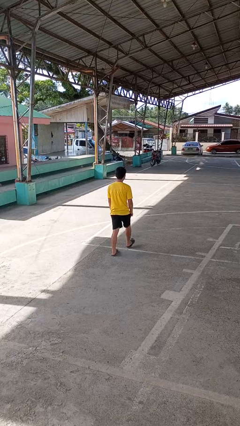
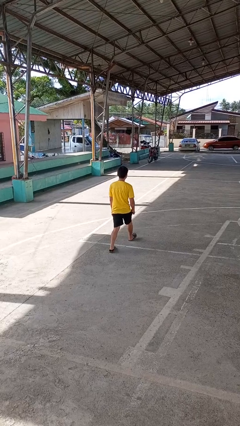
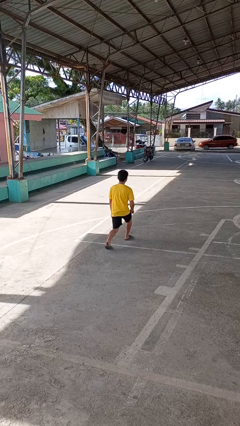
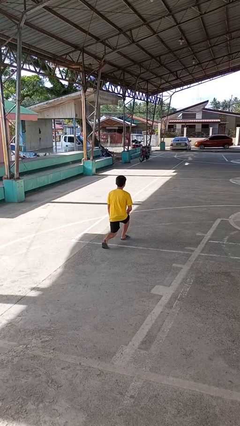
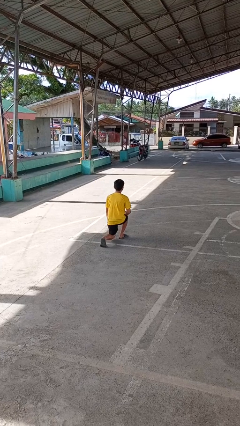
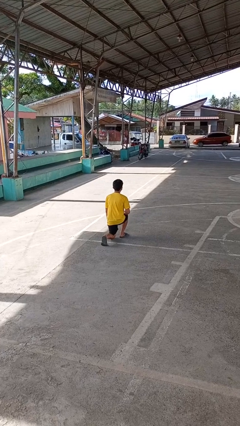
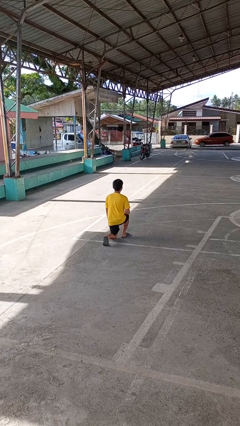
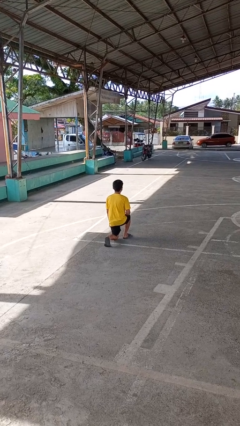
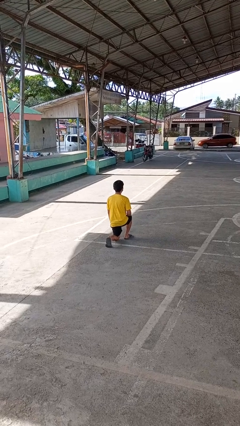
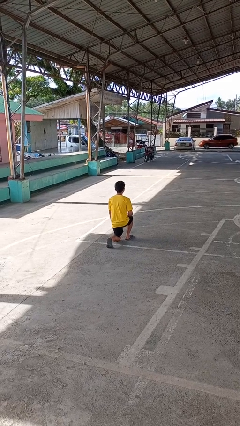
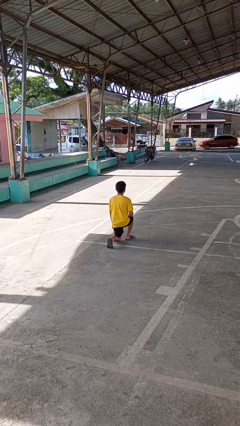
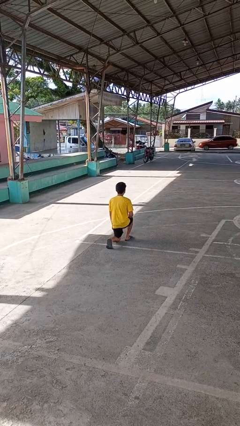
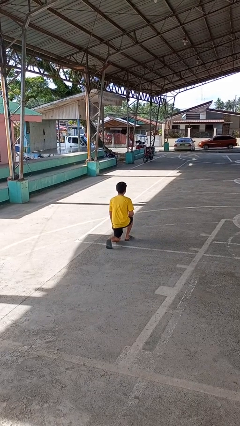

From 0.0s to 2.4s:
person kneels

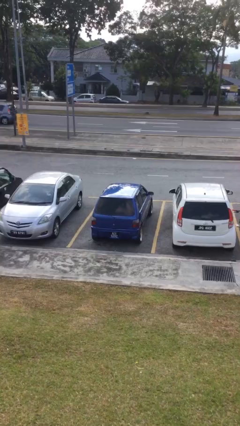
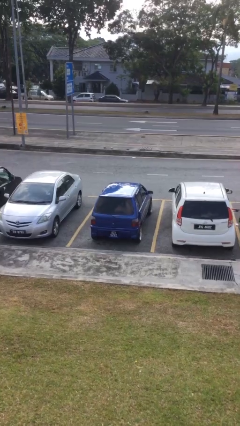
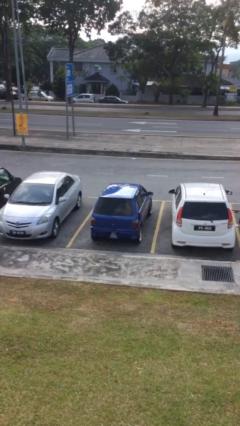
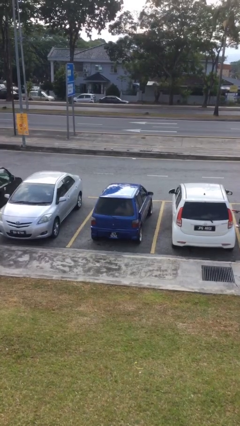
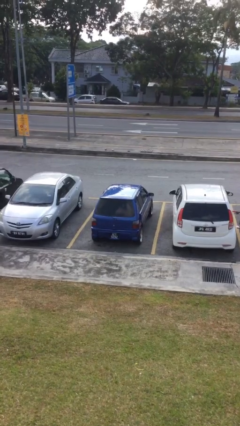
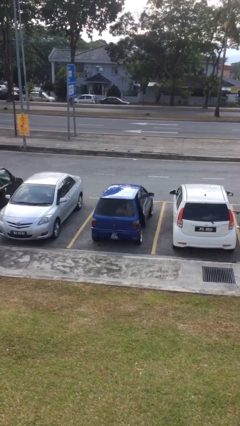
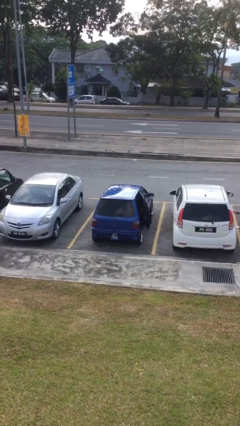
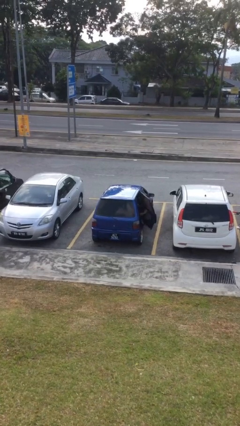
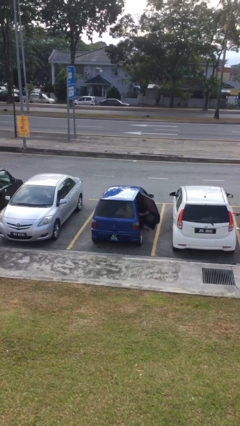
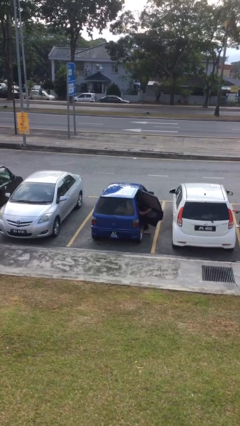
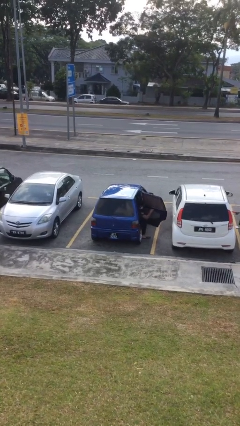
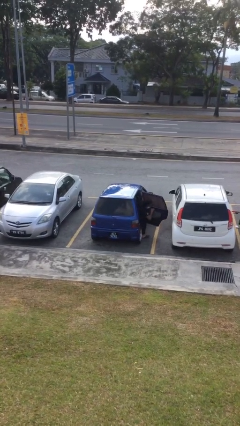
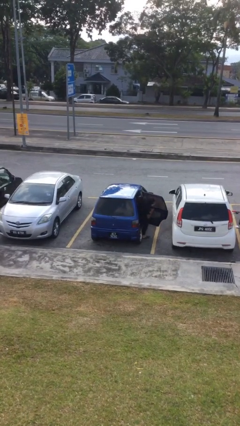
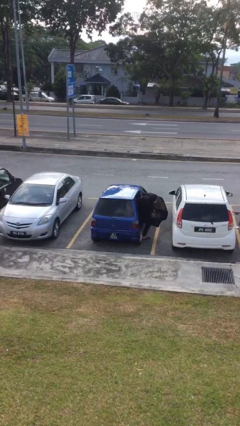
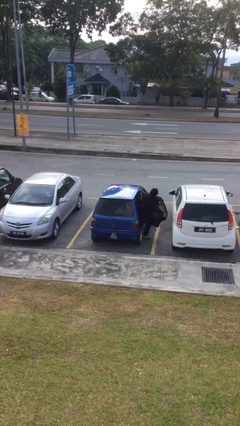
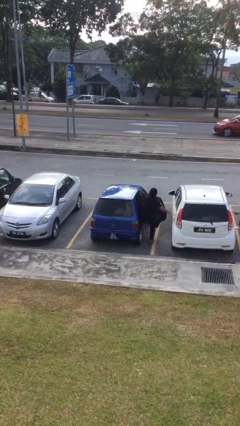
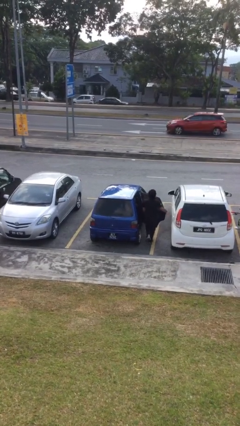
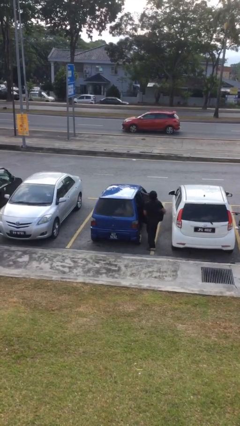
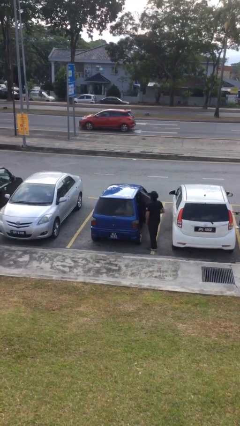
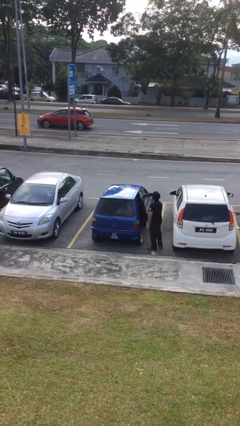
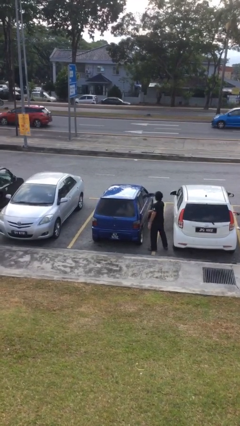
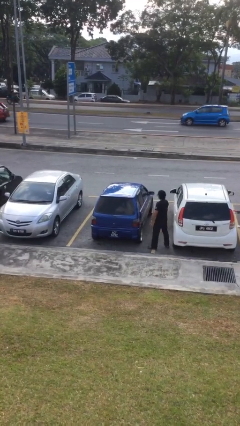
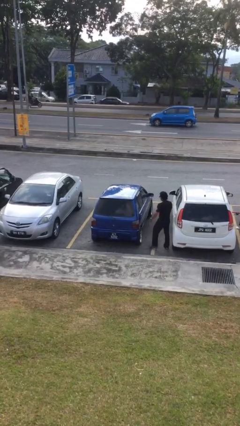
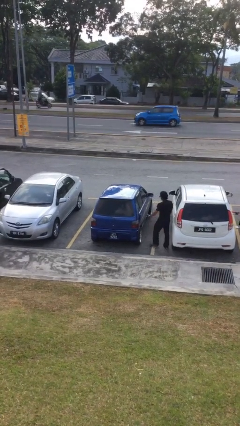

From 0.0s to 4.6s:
car drops off person

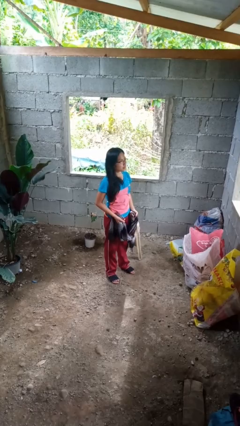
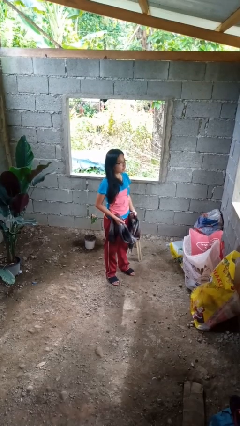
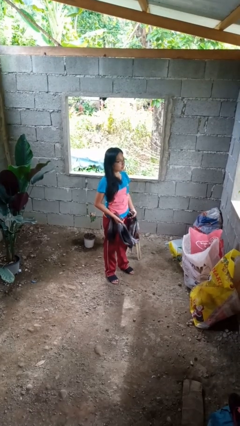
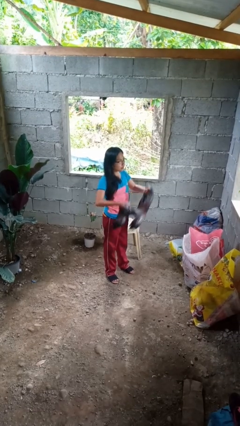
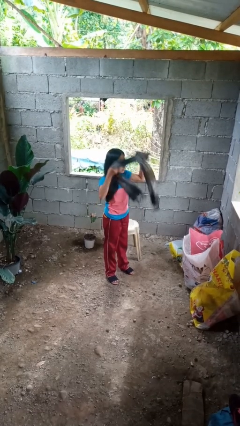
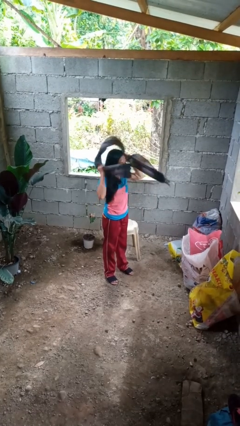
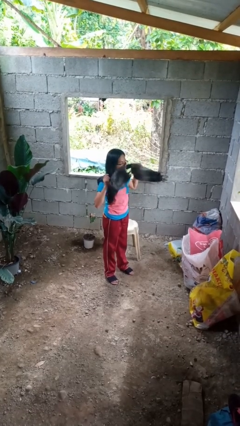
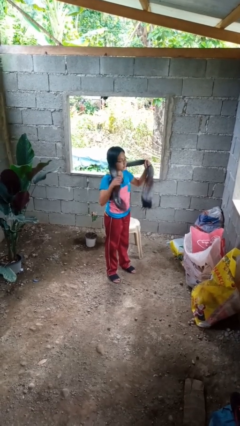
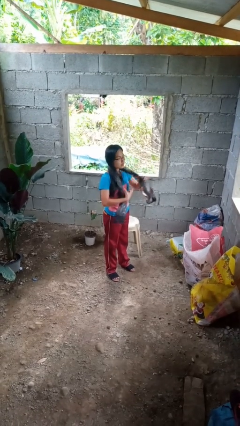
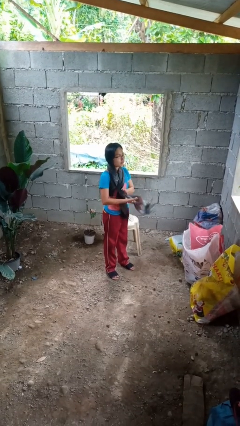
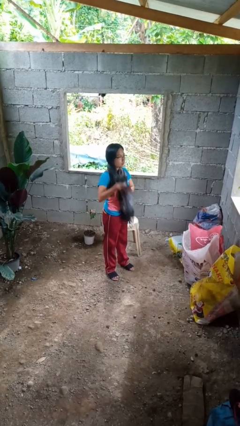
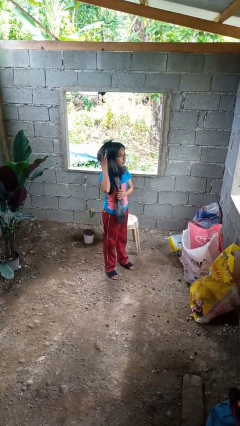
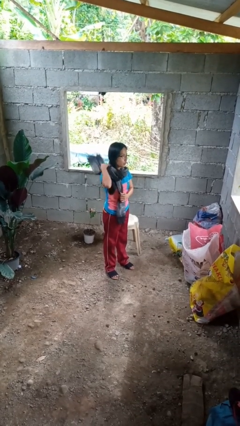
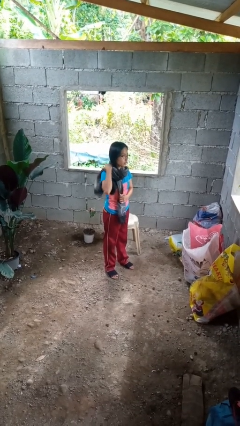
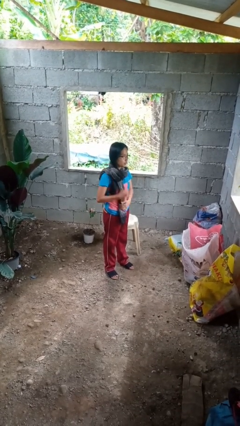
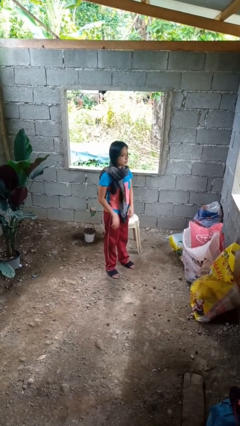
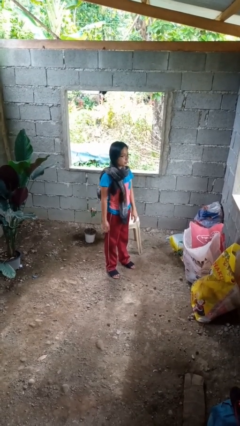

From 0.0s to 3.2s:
person puts on scarf

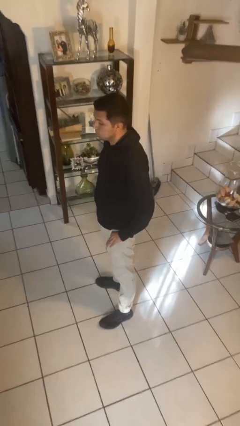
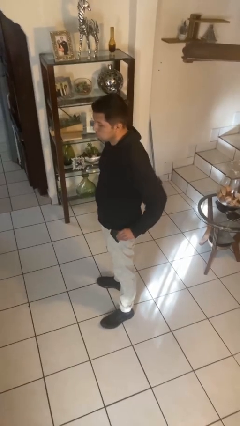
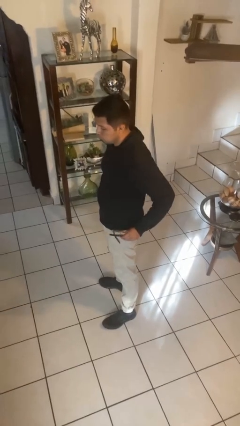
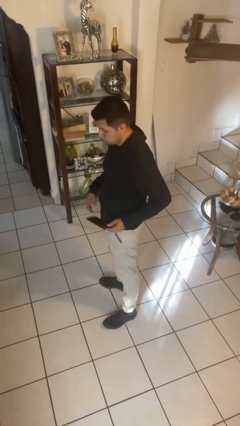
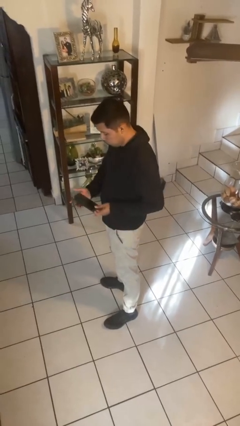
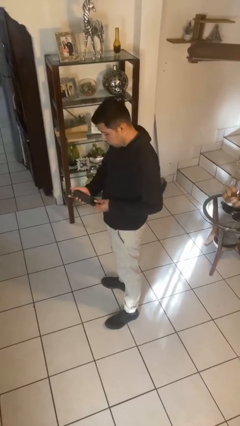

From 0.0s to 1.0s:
person takes phone from pocket

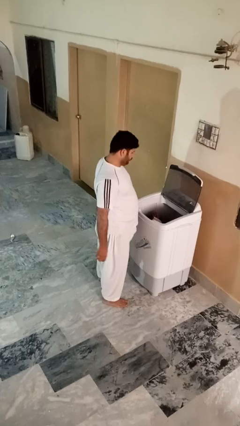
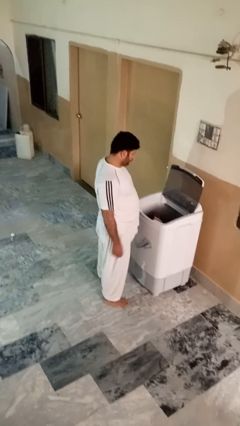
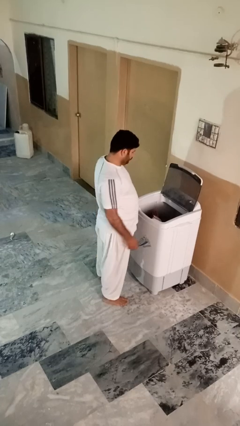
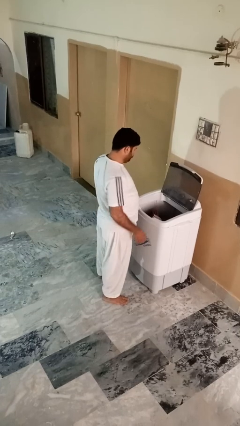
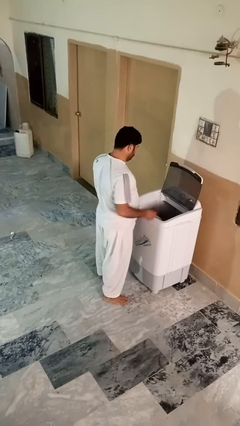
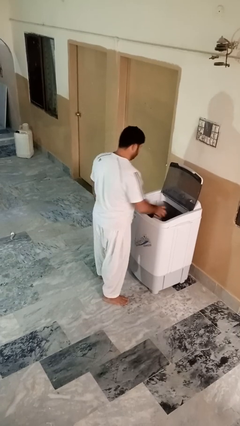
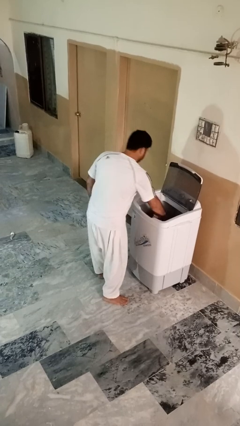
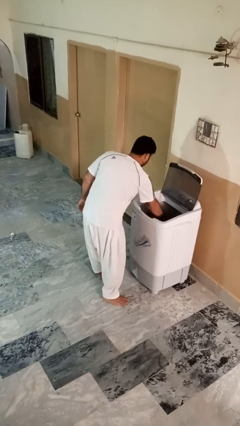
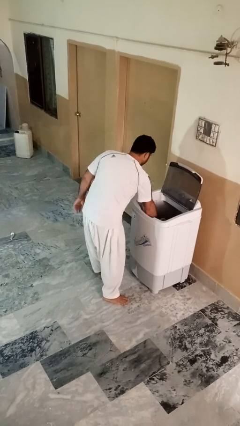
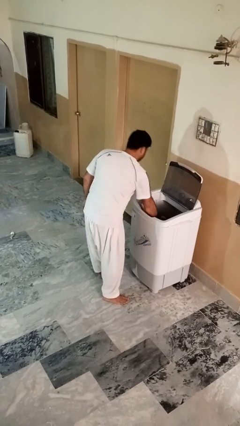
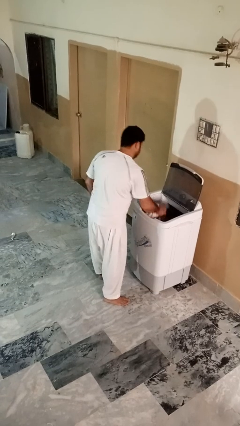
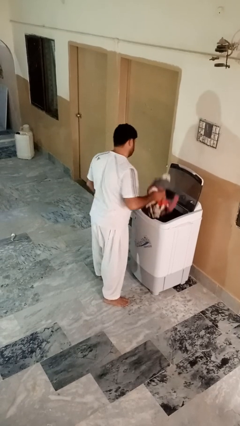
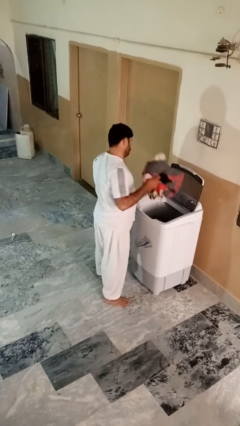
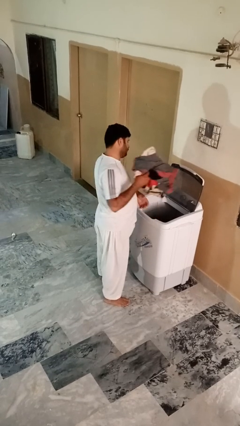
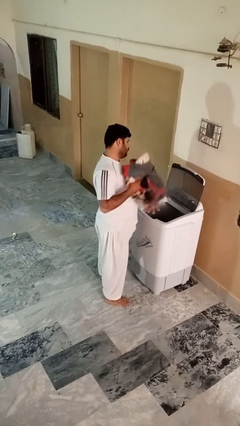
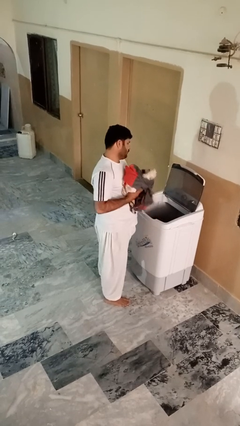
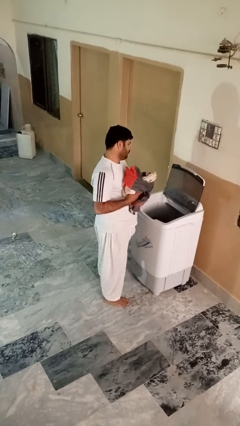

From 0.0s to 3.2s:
person unloads clotheswasher

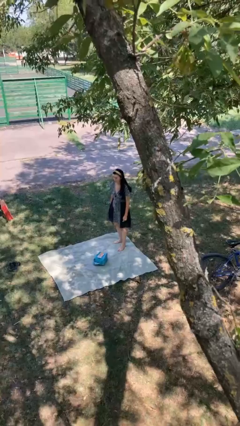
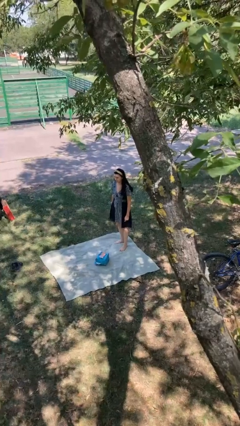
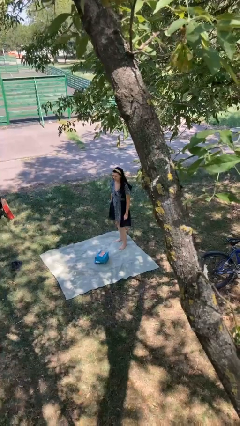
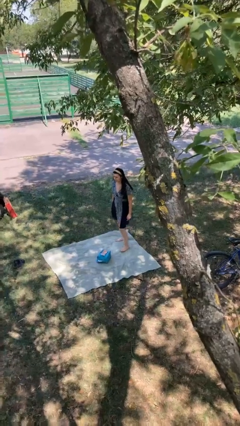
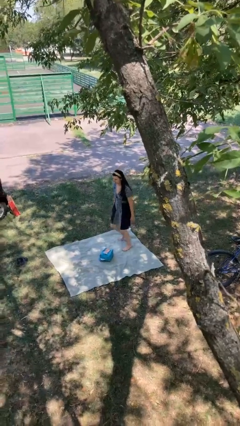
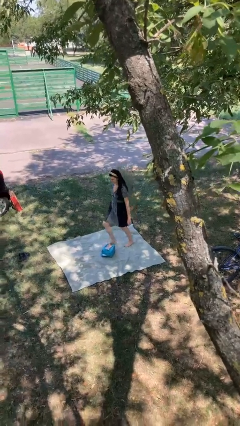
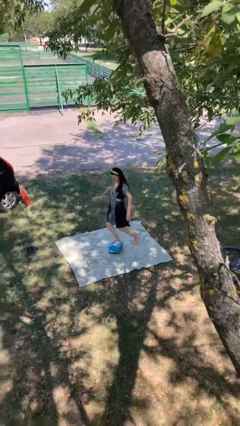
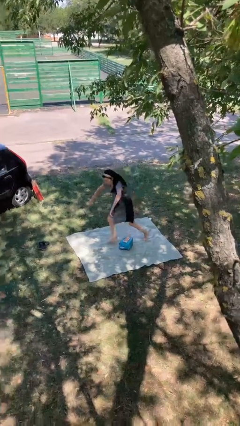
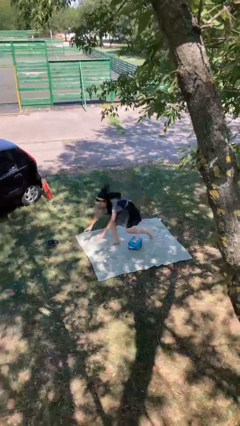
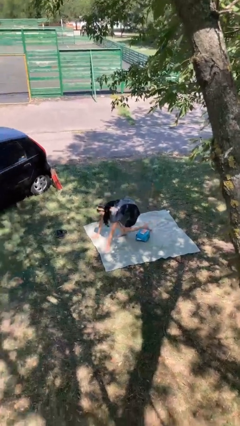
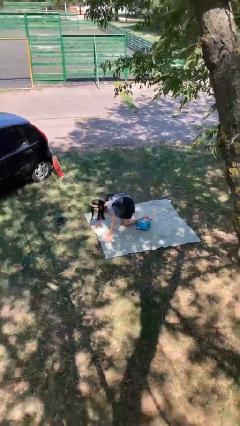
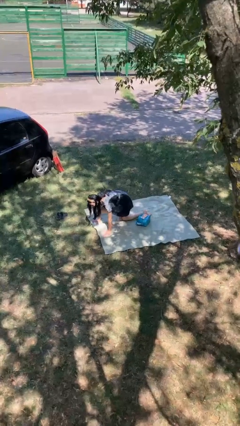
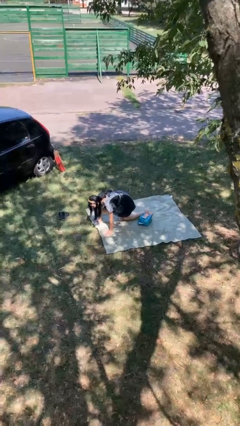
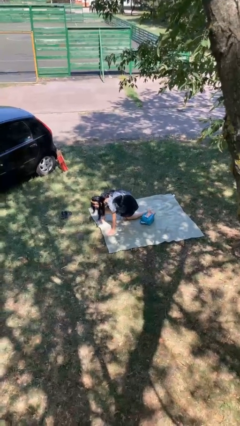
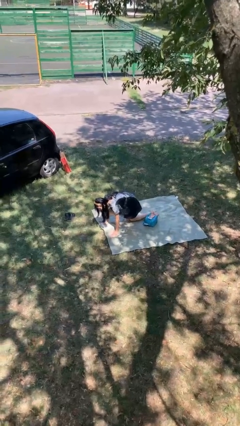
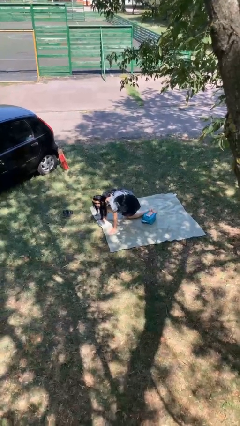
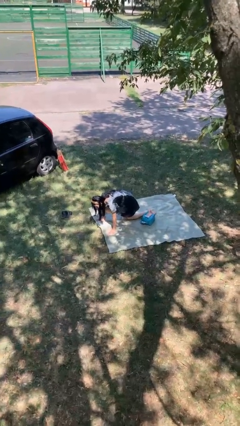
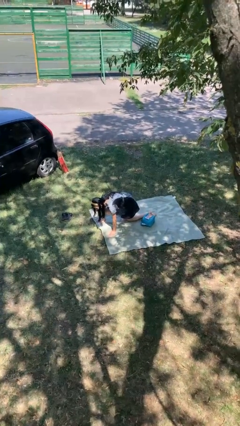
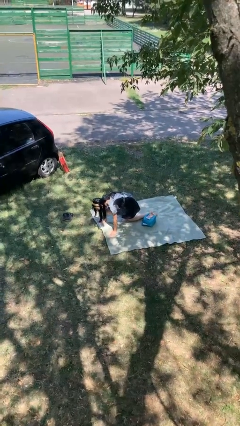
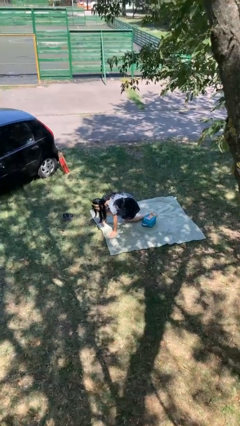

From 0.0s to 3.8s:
person trips on object on floor
